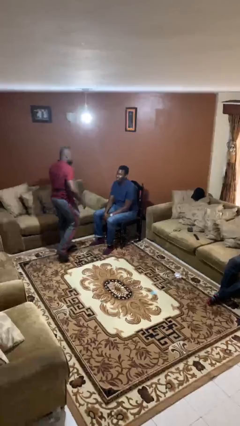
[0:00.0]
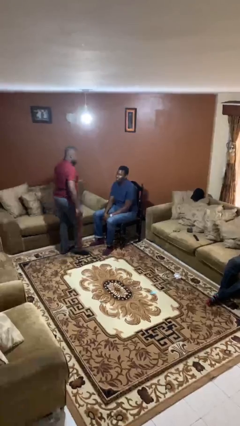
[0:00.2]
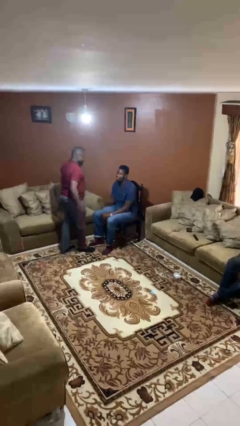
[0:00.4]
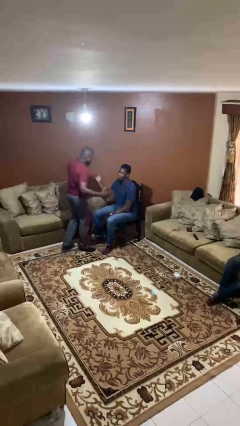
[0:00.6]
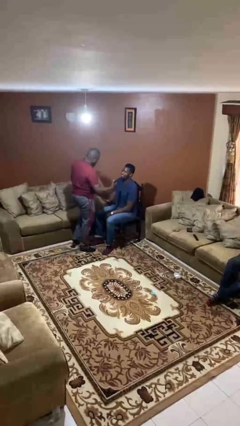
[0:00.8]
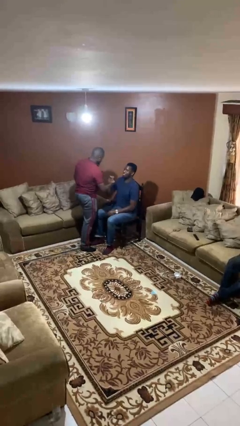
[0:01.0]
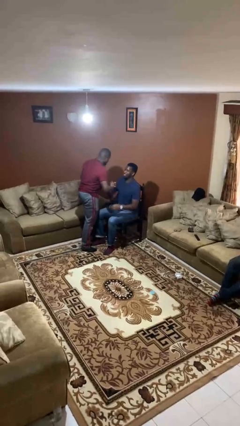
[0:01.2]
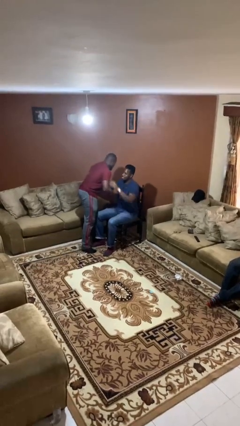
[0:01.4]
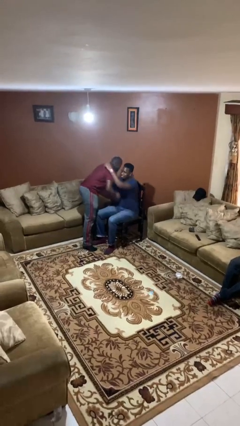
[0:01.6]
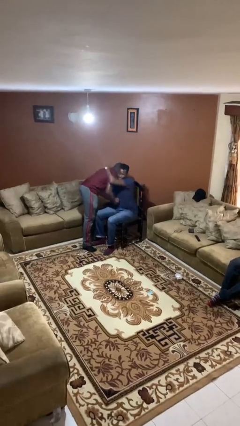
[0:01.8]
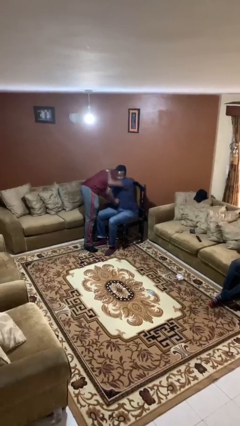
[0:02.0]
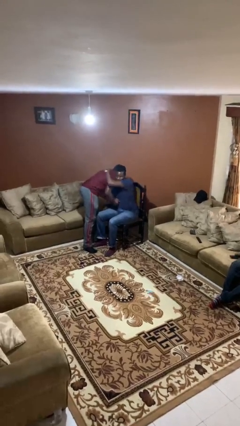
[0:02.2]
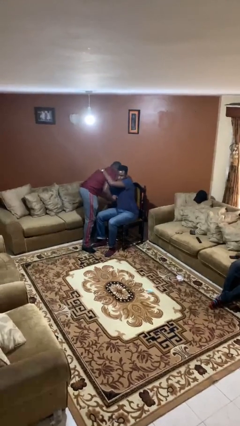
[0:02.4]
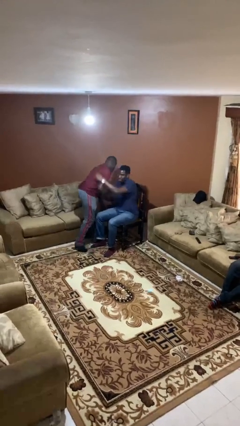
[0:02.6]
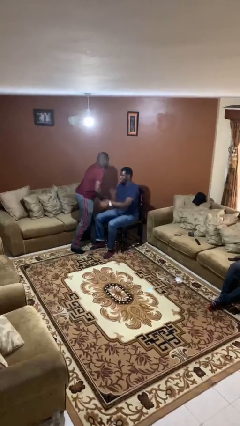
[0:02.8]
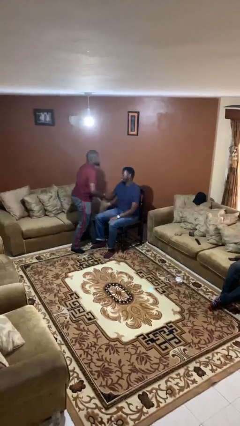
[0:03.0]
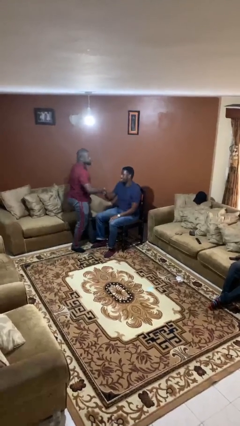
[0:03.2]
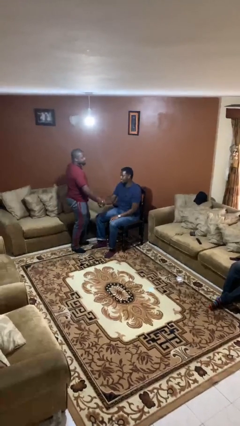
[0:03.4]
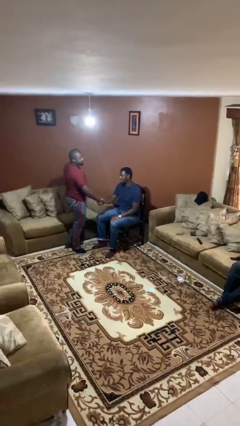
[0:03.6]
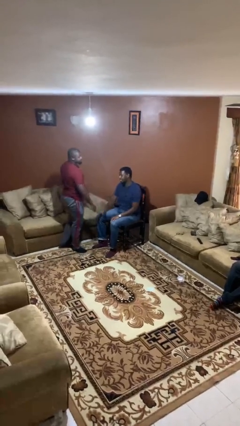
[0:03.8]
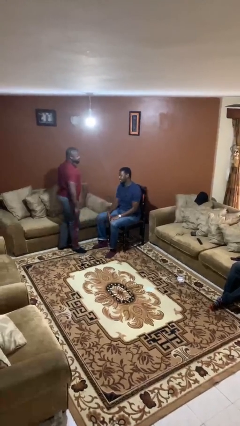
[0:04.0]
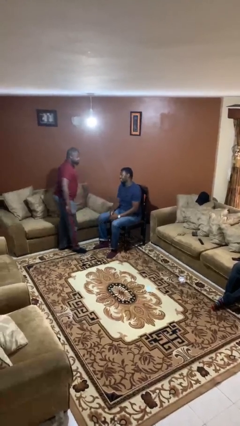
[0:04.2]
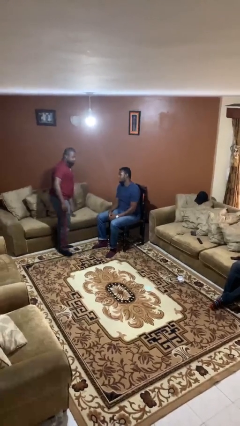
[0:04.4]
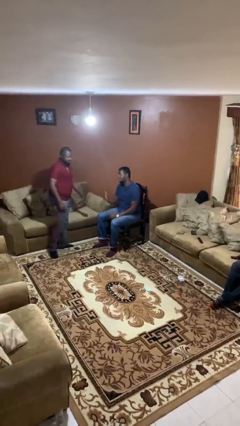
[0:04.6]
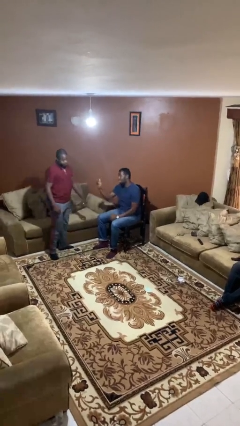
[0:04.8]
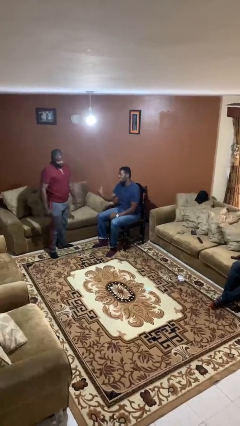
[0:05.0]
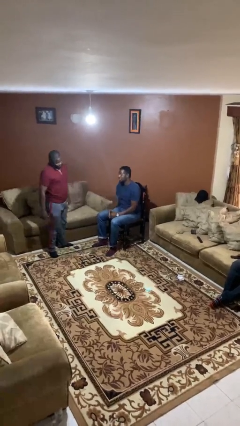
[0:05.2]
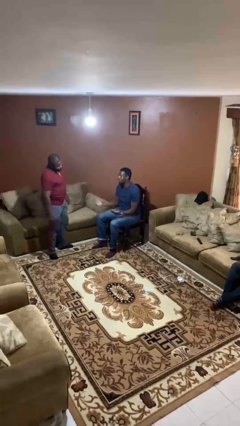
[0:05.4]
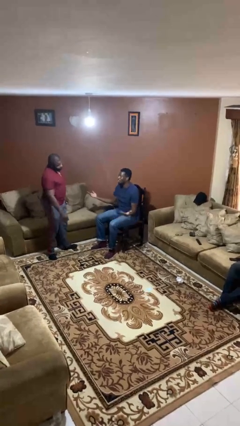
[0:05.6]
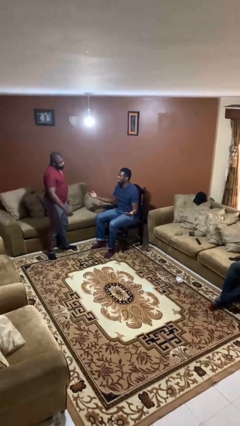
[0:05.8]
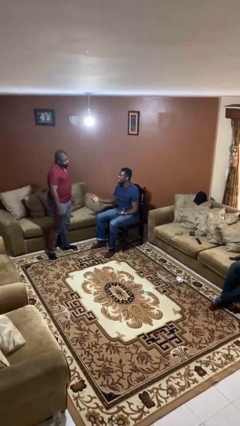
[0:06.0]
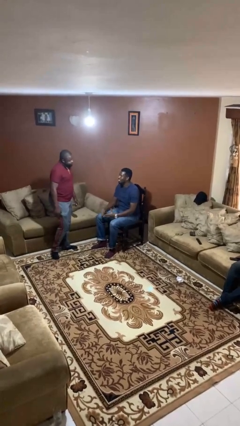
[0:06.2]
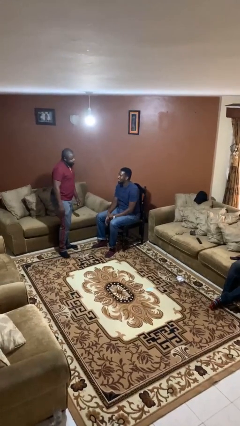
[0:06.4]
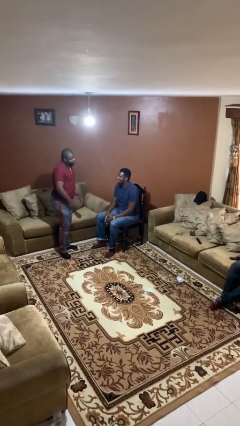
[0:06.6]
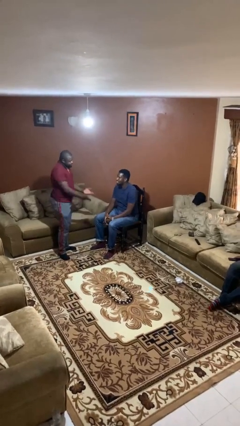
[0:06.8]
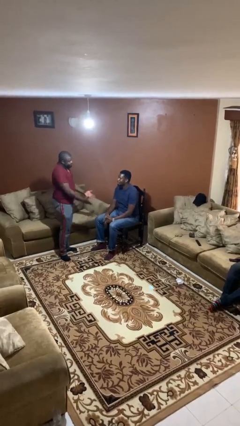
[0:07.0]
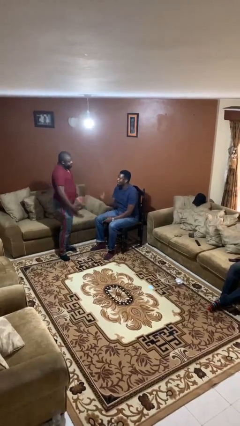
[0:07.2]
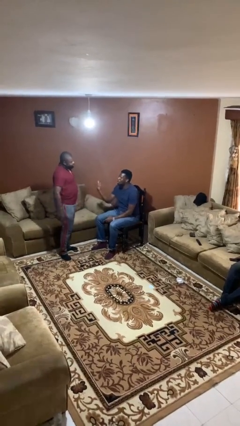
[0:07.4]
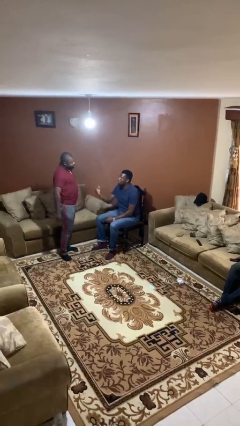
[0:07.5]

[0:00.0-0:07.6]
person embraces person

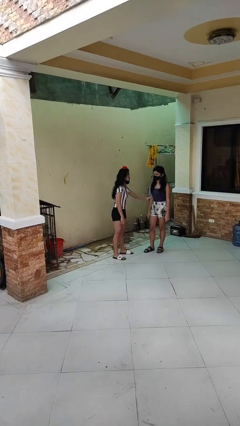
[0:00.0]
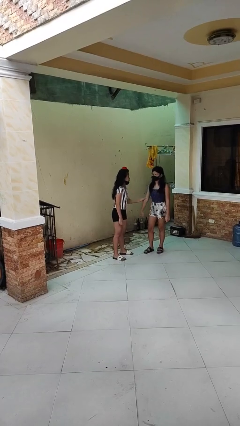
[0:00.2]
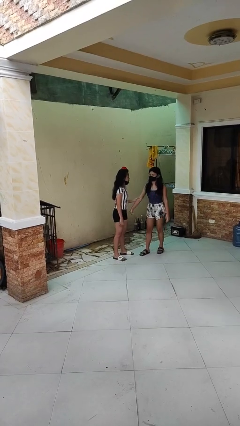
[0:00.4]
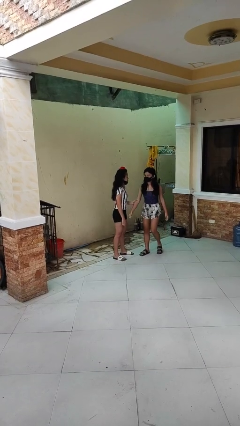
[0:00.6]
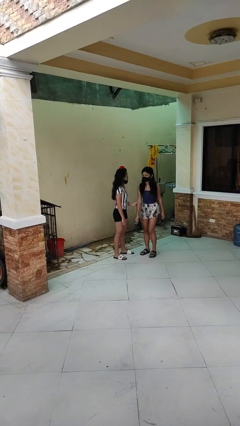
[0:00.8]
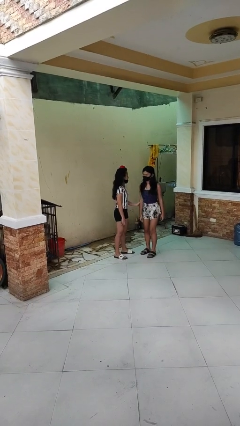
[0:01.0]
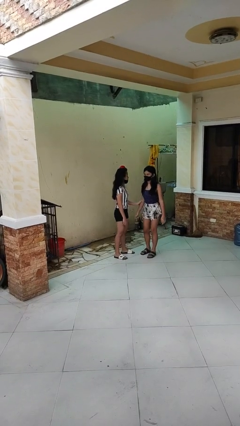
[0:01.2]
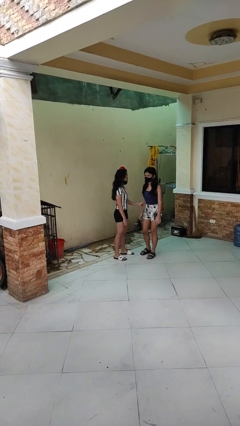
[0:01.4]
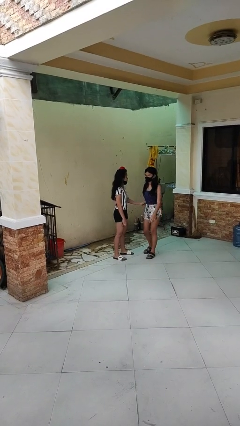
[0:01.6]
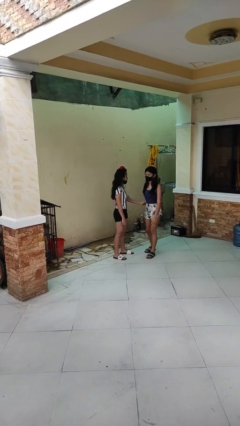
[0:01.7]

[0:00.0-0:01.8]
person grabs person by forearm

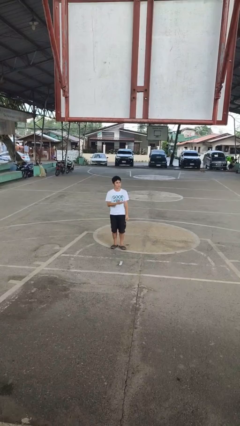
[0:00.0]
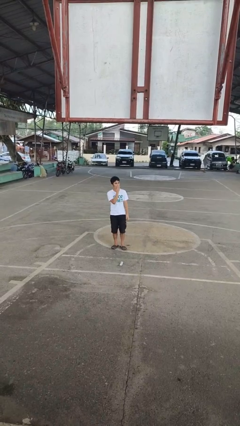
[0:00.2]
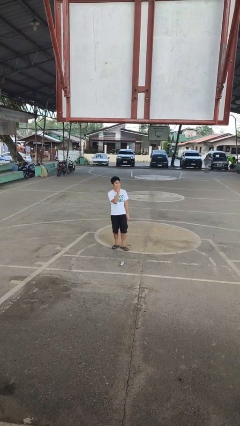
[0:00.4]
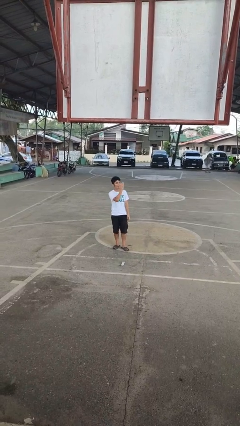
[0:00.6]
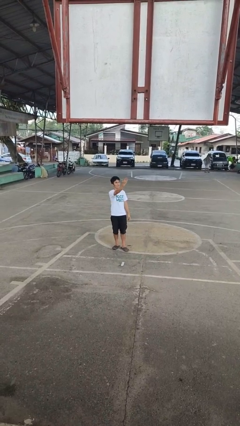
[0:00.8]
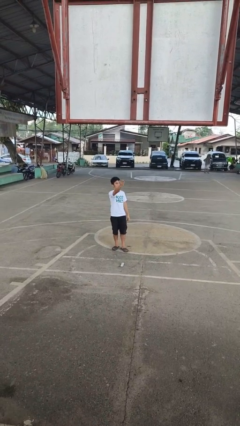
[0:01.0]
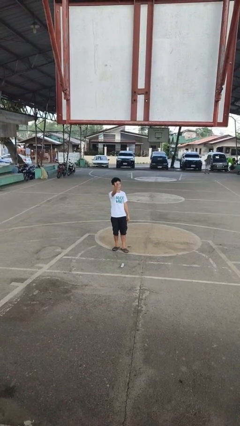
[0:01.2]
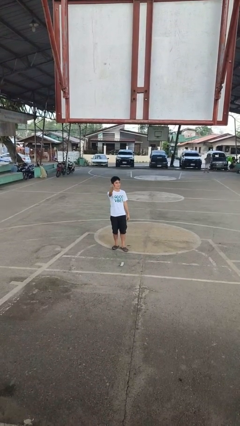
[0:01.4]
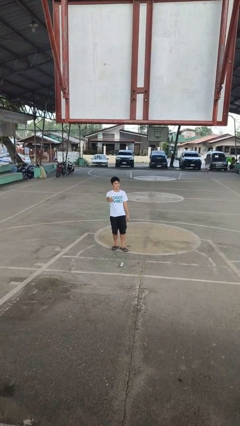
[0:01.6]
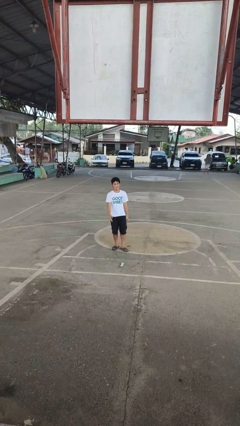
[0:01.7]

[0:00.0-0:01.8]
person gestures blow kiss

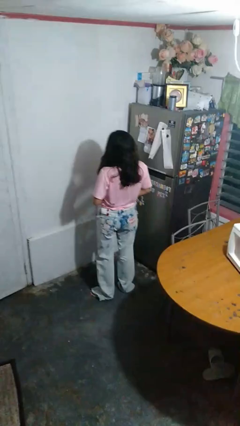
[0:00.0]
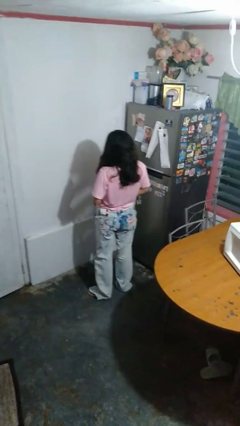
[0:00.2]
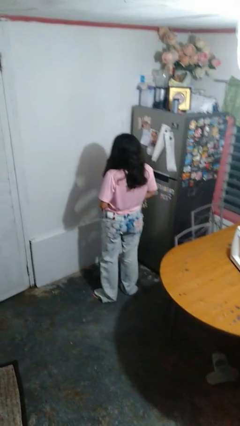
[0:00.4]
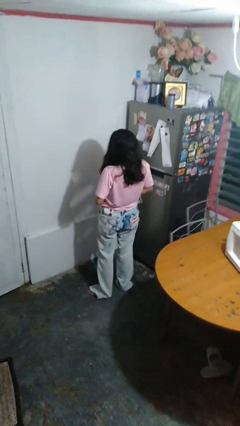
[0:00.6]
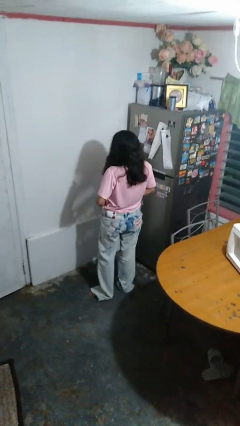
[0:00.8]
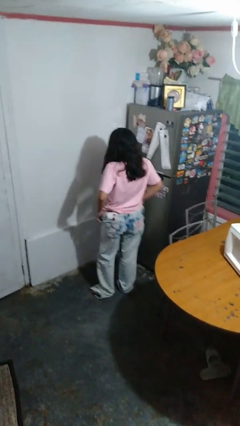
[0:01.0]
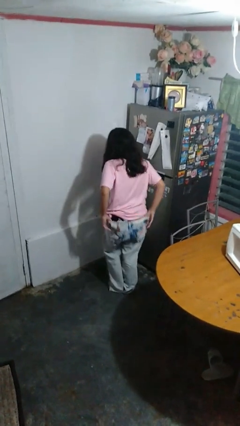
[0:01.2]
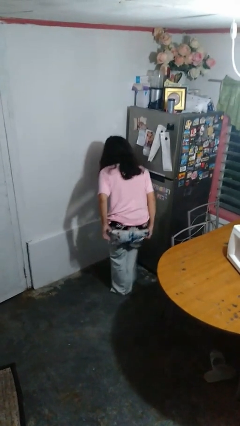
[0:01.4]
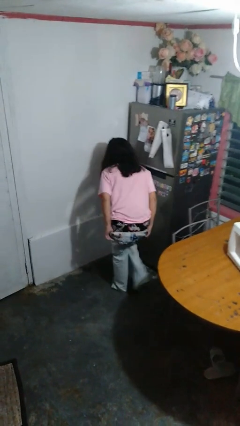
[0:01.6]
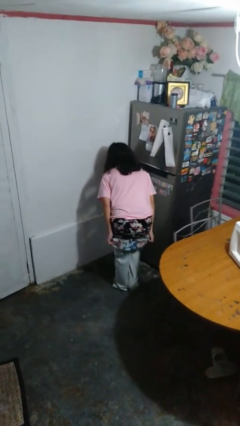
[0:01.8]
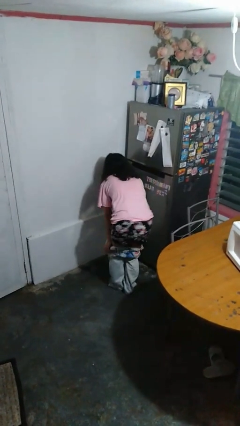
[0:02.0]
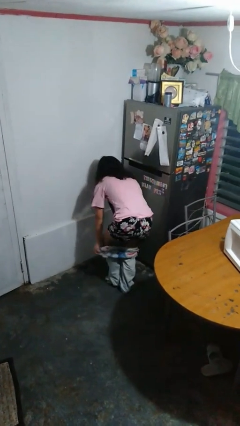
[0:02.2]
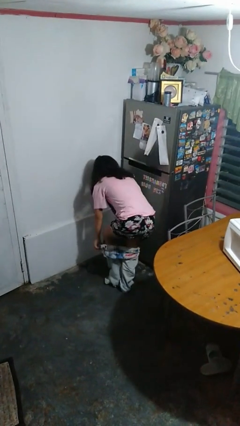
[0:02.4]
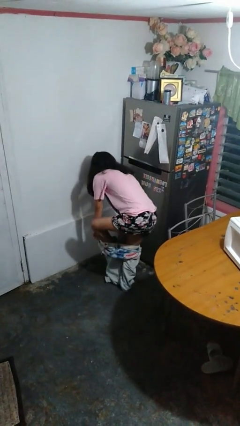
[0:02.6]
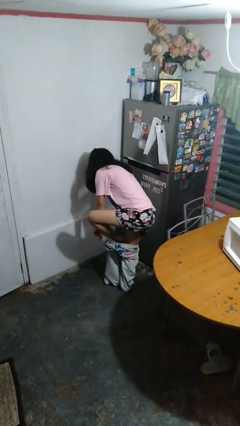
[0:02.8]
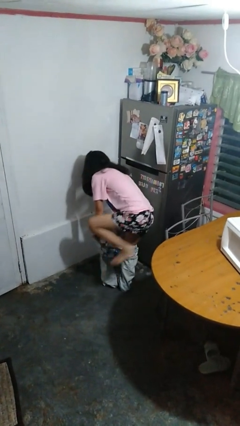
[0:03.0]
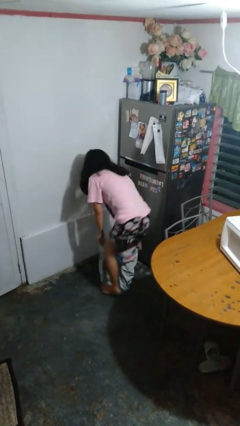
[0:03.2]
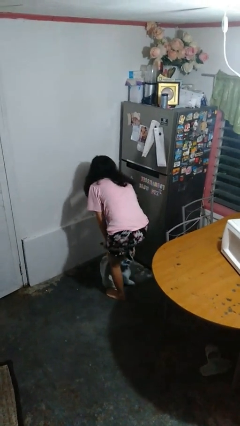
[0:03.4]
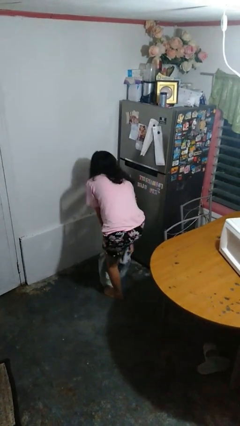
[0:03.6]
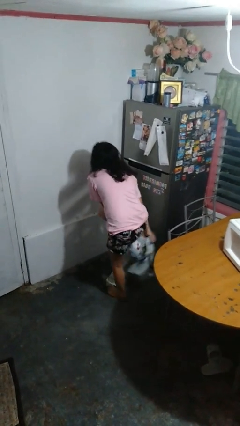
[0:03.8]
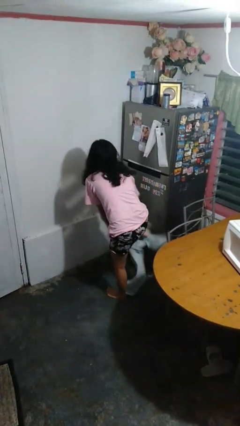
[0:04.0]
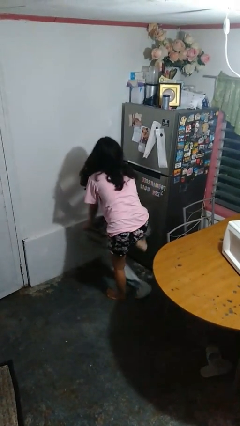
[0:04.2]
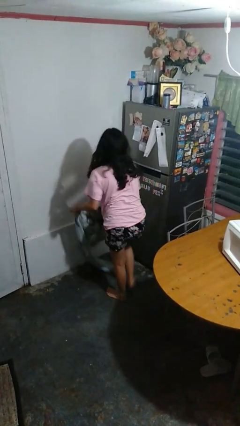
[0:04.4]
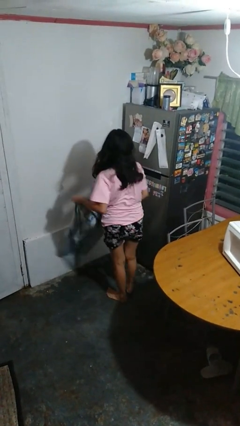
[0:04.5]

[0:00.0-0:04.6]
person takes off pants

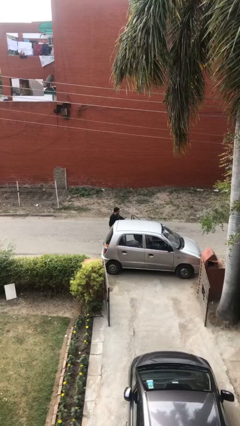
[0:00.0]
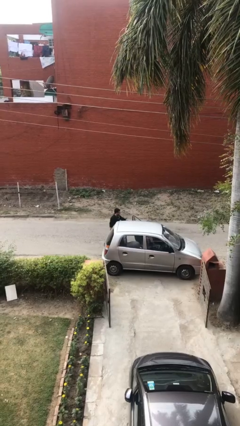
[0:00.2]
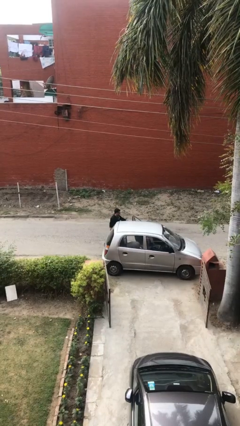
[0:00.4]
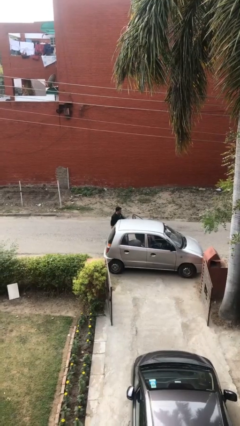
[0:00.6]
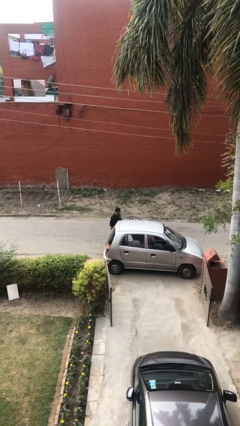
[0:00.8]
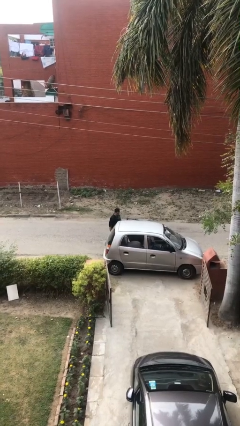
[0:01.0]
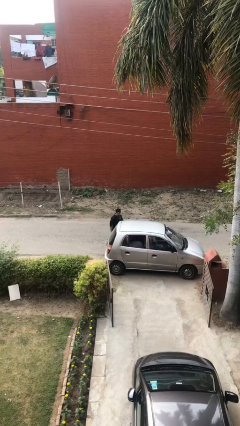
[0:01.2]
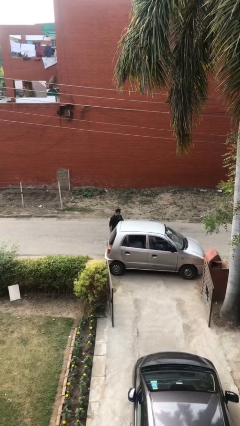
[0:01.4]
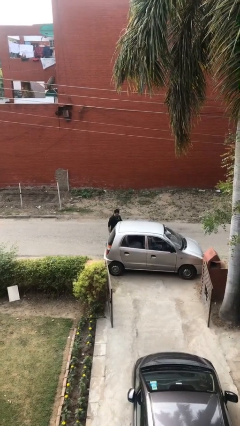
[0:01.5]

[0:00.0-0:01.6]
person closes car door
